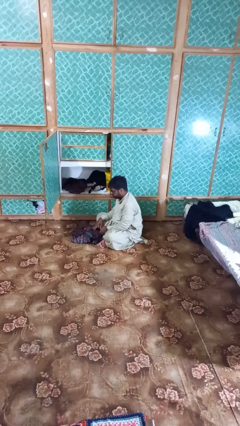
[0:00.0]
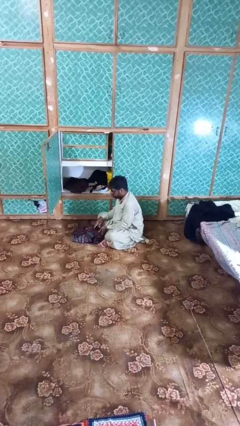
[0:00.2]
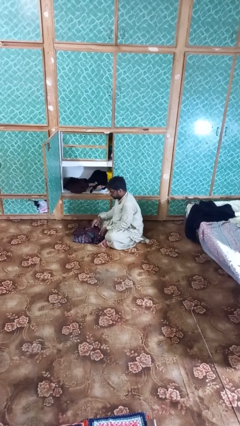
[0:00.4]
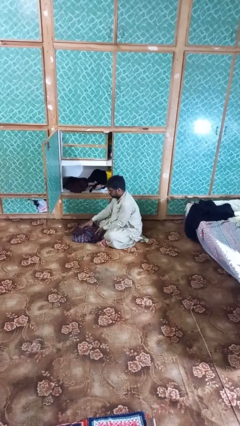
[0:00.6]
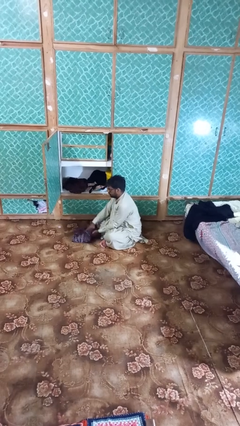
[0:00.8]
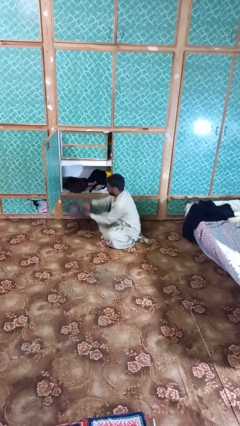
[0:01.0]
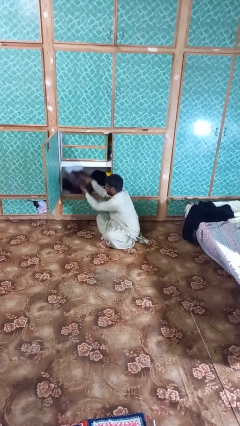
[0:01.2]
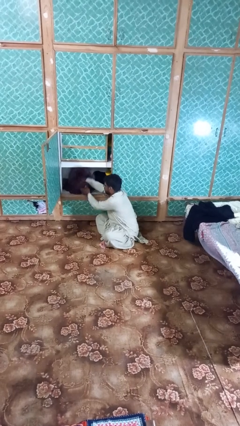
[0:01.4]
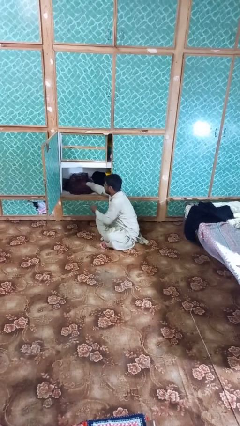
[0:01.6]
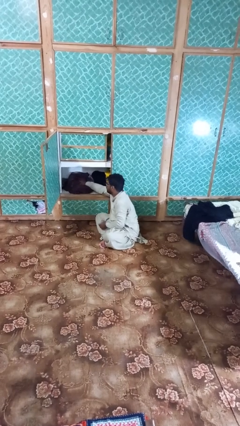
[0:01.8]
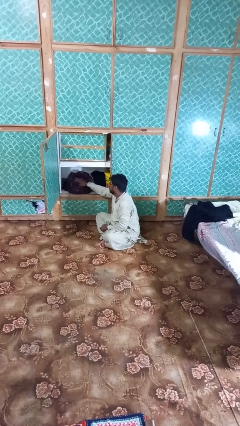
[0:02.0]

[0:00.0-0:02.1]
person puts clothes into dresser

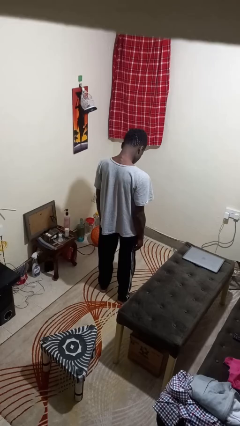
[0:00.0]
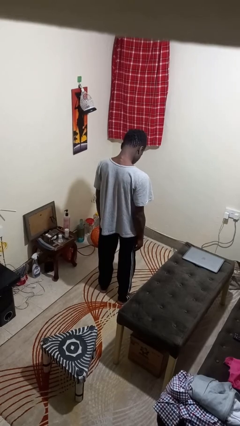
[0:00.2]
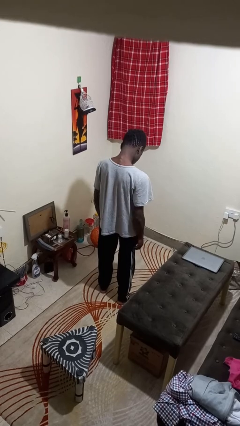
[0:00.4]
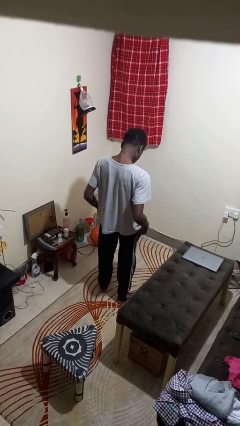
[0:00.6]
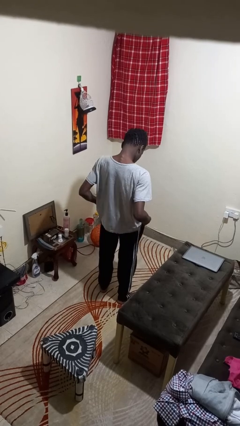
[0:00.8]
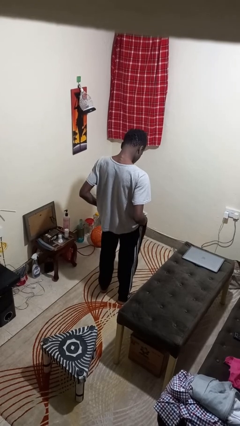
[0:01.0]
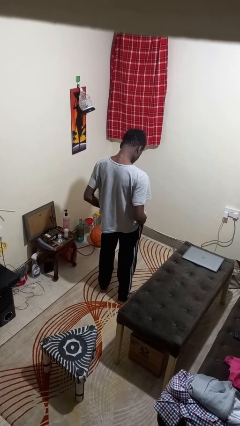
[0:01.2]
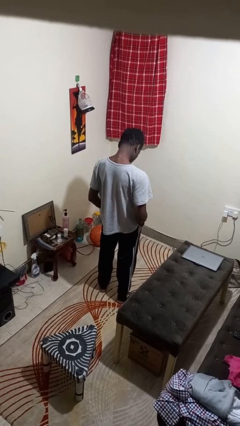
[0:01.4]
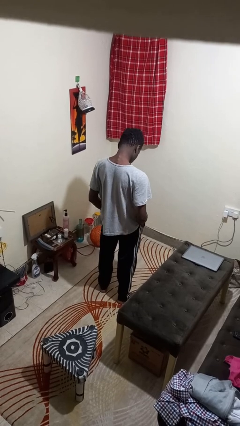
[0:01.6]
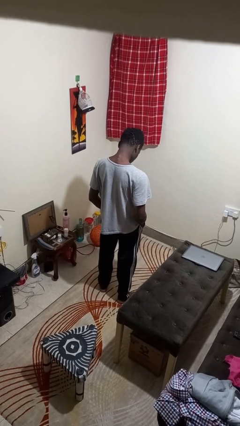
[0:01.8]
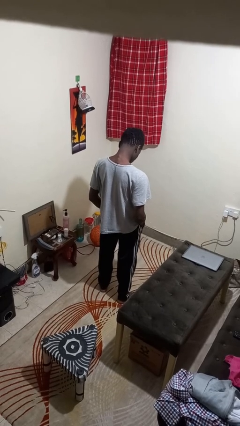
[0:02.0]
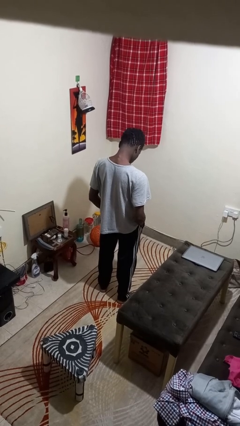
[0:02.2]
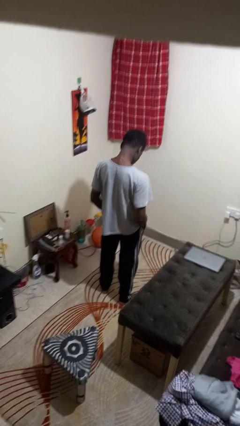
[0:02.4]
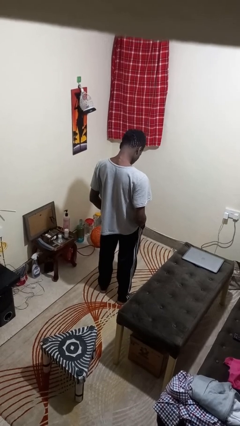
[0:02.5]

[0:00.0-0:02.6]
person puts hands in back pockets

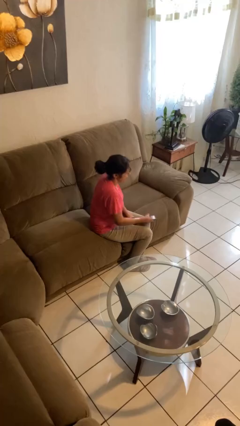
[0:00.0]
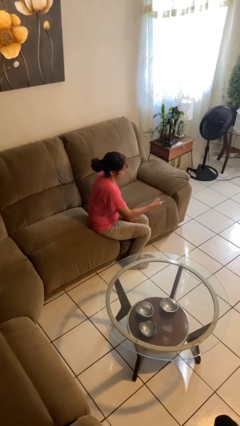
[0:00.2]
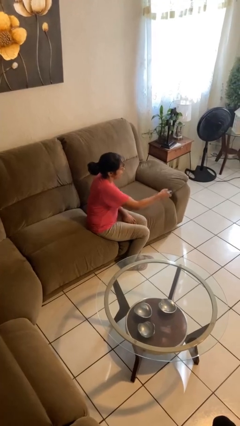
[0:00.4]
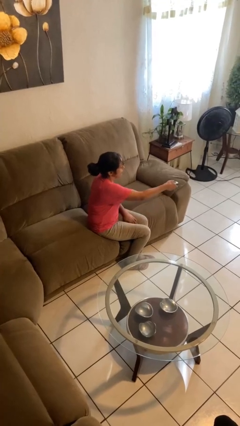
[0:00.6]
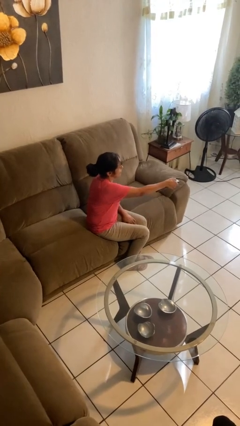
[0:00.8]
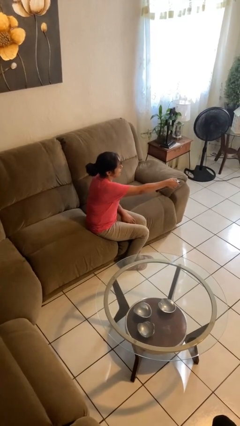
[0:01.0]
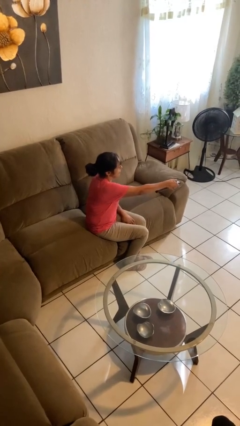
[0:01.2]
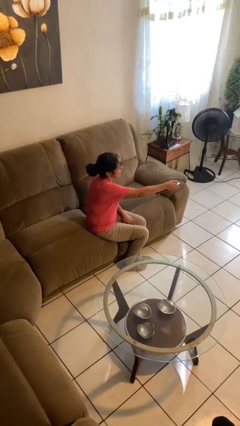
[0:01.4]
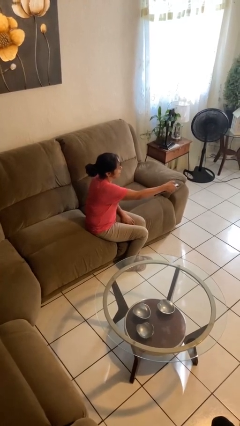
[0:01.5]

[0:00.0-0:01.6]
person uses television remote

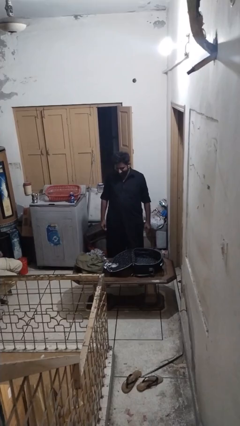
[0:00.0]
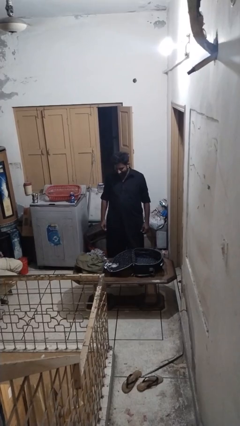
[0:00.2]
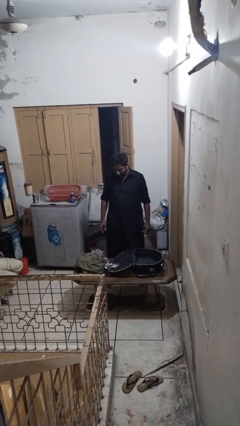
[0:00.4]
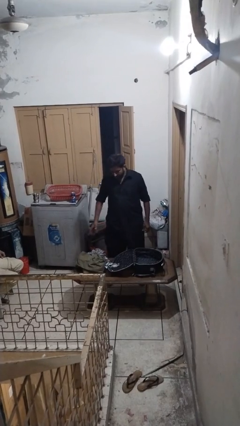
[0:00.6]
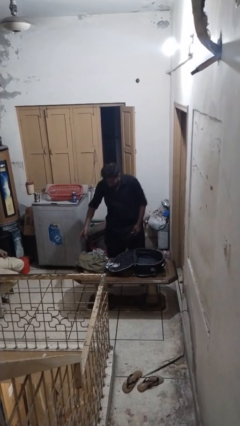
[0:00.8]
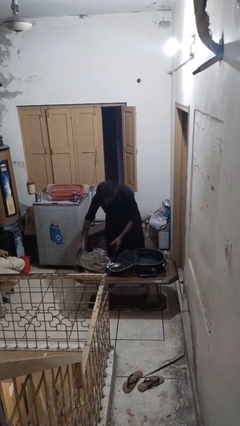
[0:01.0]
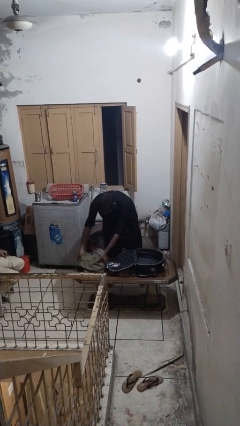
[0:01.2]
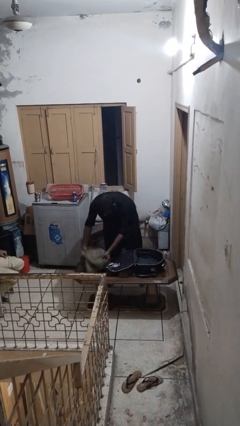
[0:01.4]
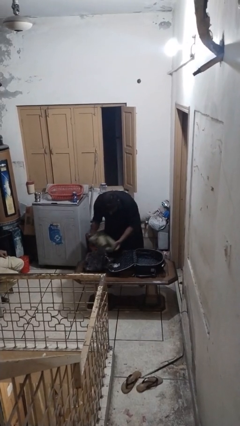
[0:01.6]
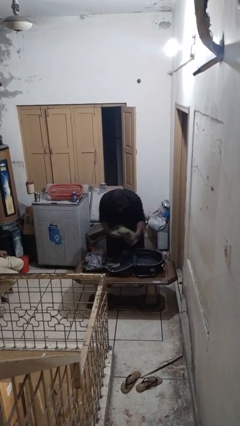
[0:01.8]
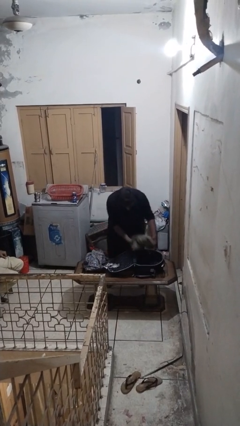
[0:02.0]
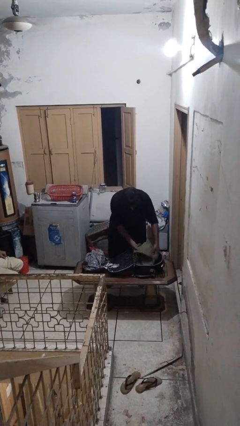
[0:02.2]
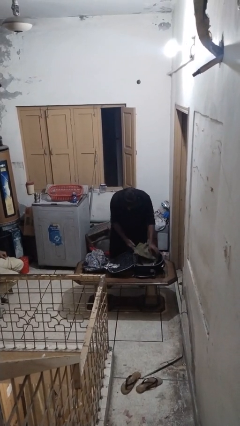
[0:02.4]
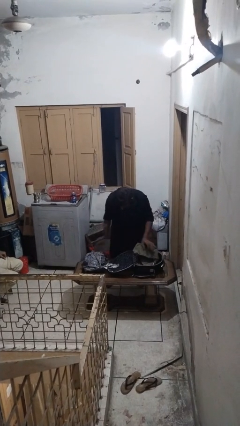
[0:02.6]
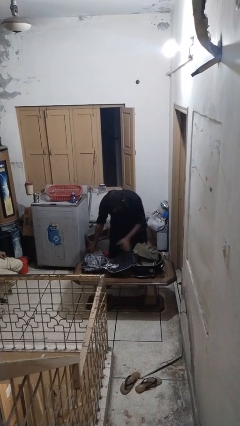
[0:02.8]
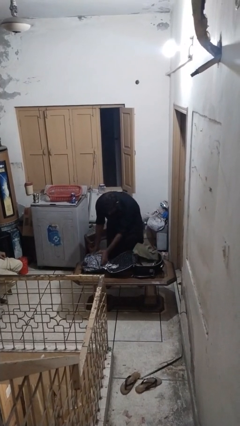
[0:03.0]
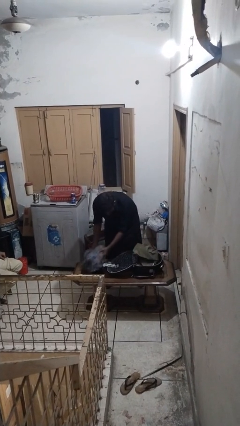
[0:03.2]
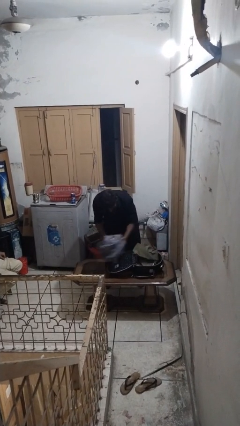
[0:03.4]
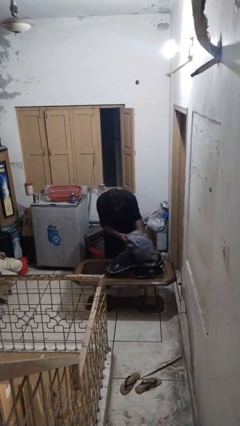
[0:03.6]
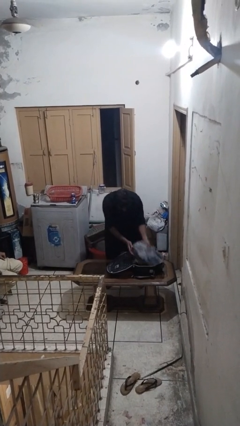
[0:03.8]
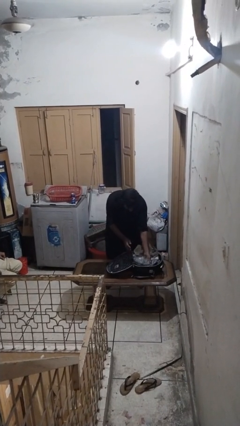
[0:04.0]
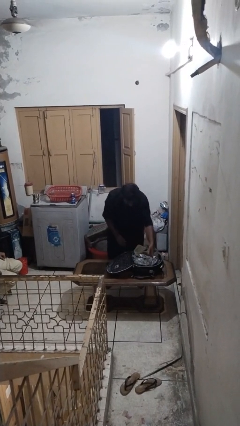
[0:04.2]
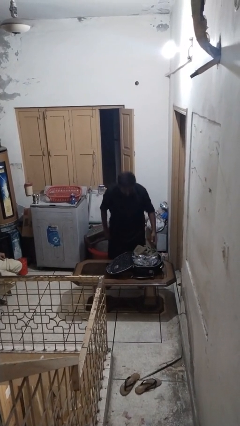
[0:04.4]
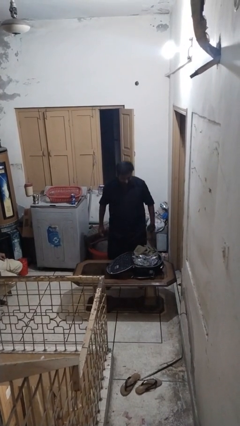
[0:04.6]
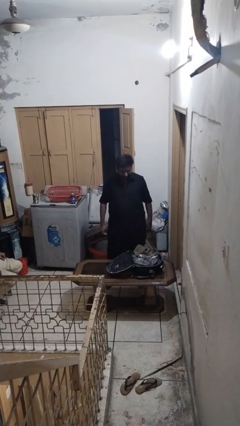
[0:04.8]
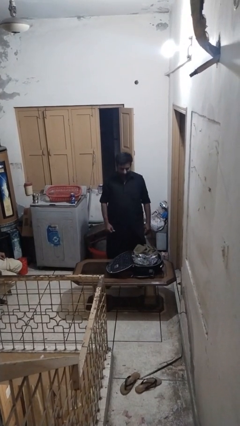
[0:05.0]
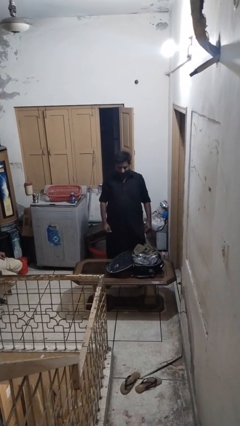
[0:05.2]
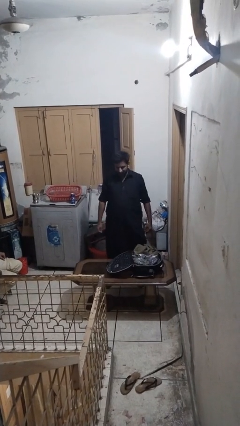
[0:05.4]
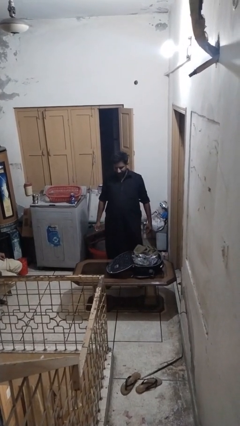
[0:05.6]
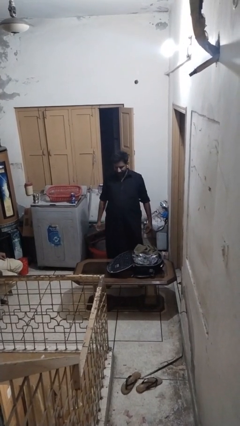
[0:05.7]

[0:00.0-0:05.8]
person loads clothes into suitcase

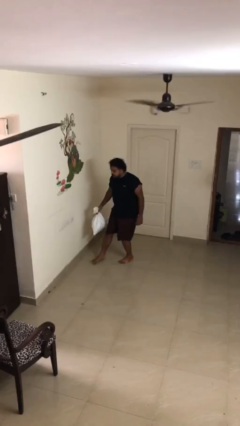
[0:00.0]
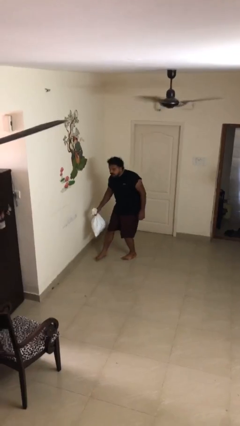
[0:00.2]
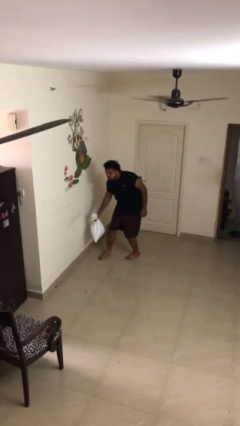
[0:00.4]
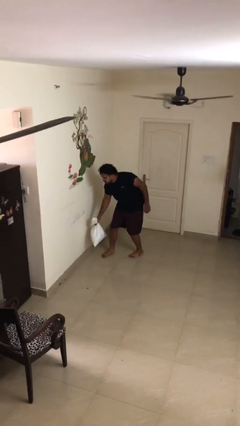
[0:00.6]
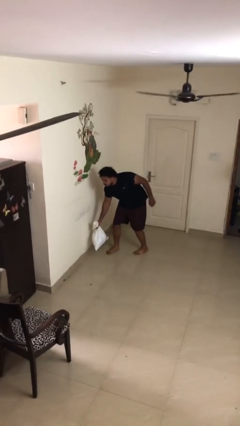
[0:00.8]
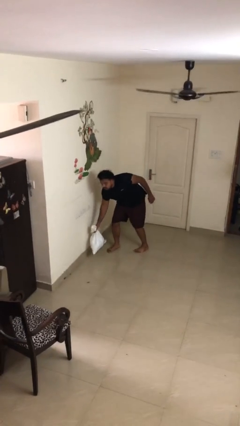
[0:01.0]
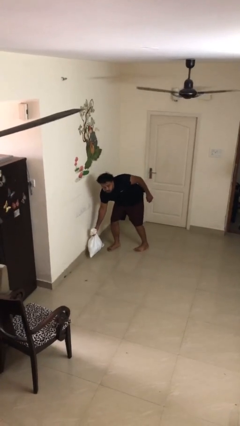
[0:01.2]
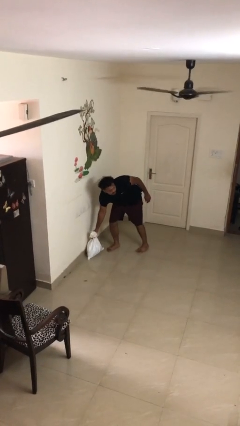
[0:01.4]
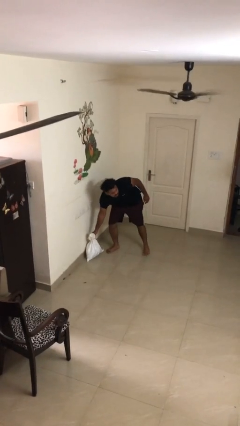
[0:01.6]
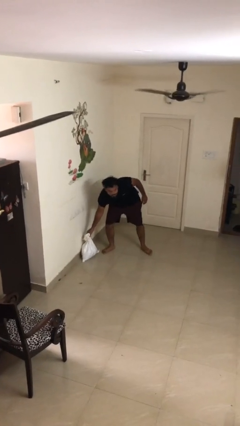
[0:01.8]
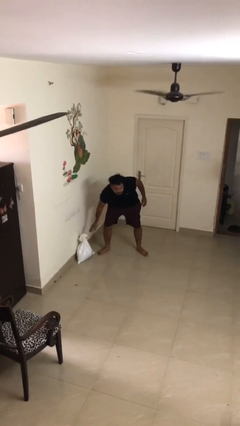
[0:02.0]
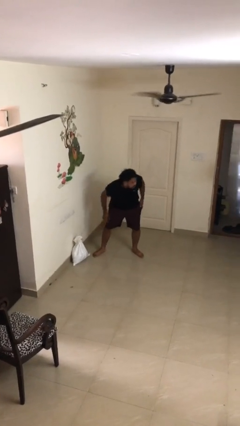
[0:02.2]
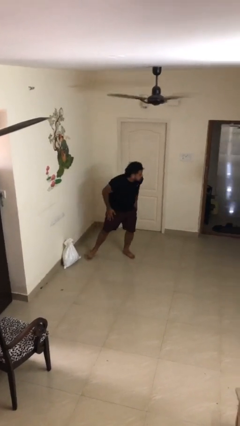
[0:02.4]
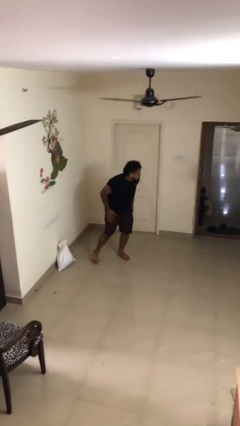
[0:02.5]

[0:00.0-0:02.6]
person puts down object on floor

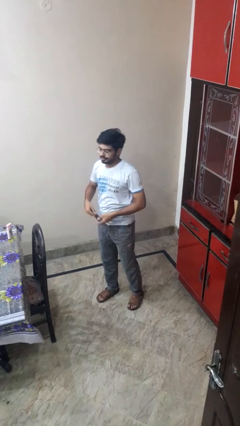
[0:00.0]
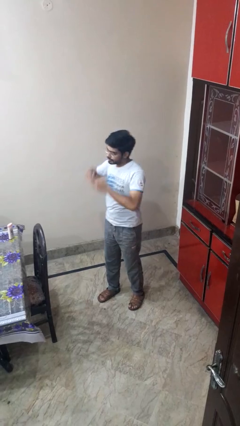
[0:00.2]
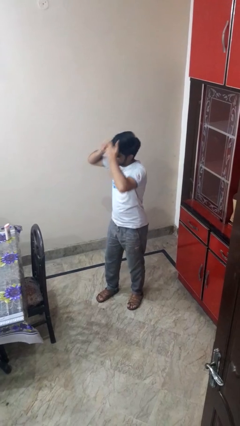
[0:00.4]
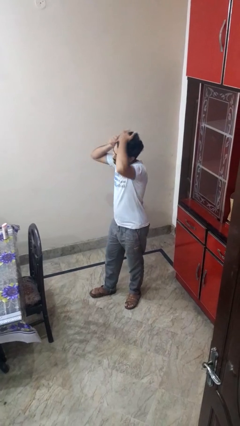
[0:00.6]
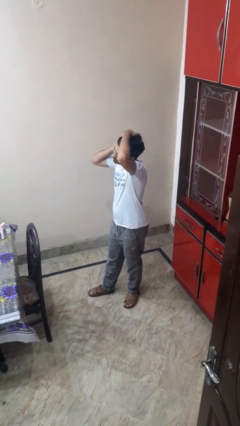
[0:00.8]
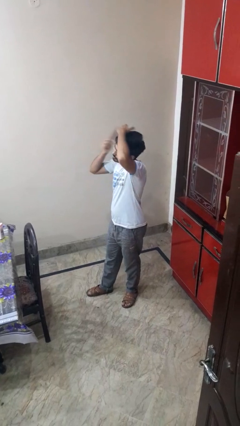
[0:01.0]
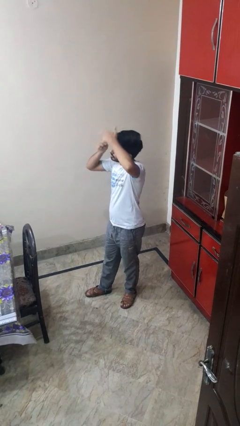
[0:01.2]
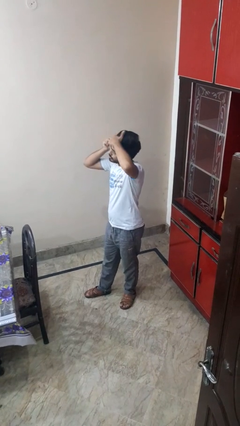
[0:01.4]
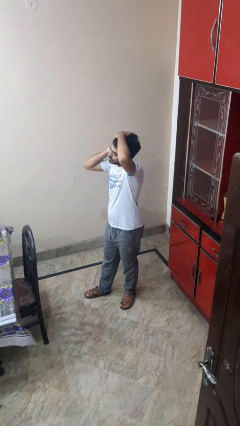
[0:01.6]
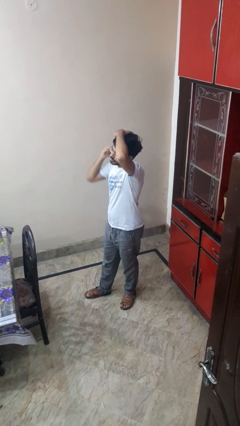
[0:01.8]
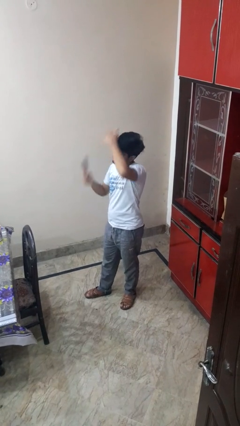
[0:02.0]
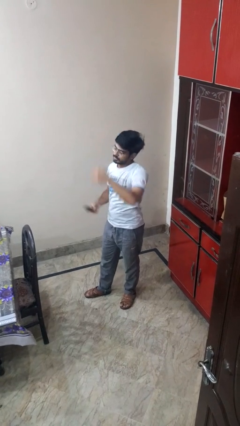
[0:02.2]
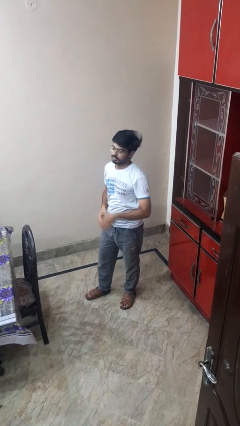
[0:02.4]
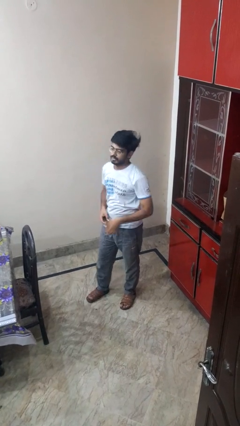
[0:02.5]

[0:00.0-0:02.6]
person brushes hair

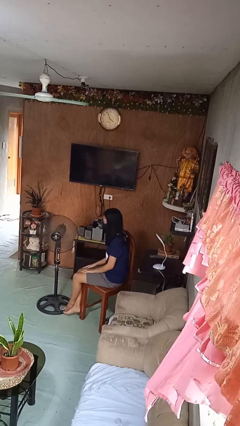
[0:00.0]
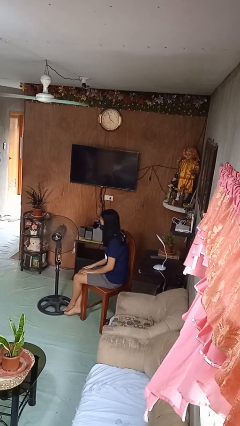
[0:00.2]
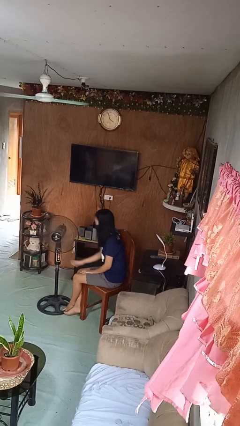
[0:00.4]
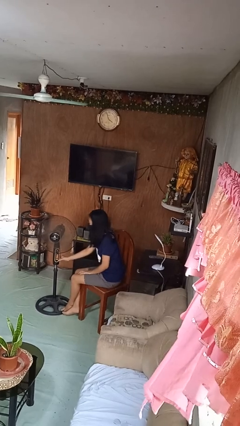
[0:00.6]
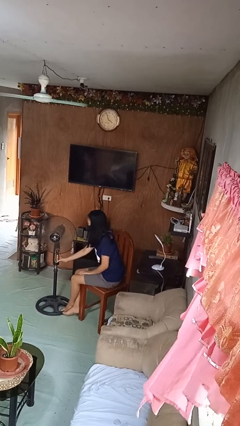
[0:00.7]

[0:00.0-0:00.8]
person turns off fan
